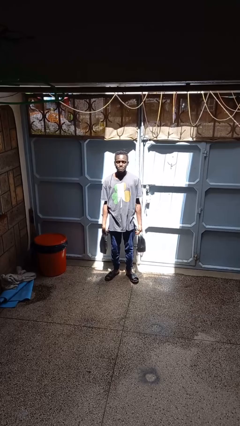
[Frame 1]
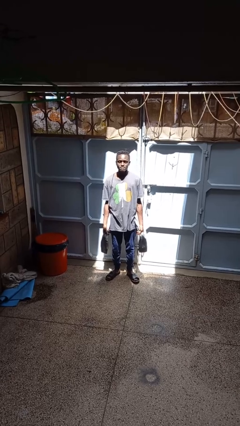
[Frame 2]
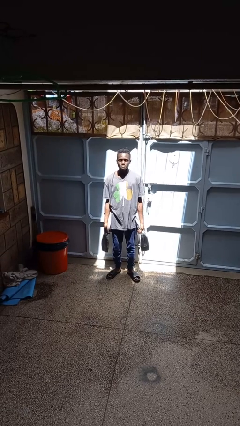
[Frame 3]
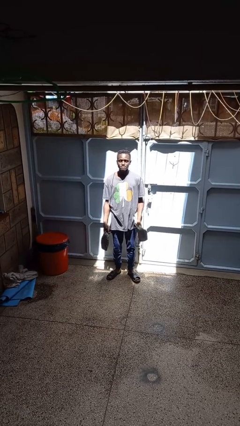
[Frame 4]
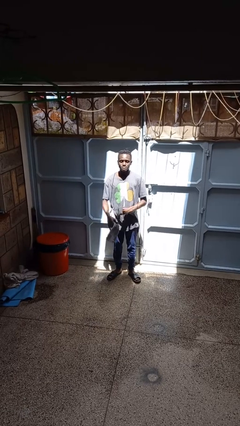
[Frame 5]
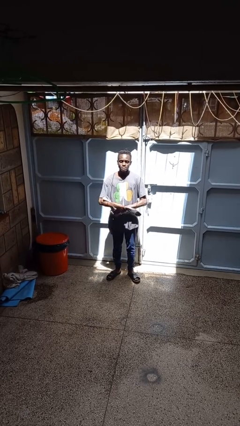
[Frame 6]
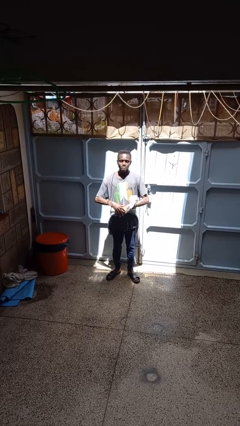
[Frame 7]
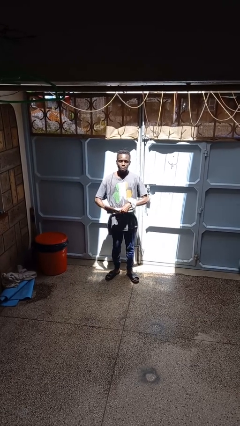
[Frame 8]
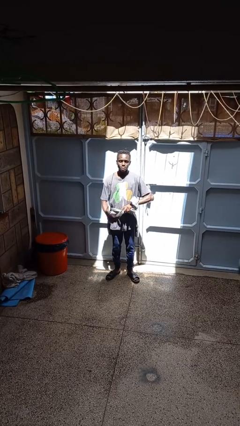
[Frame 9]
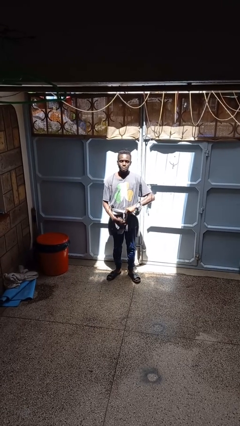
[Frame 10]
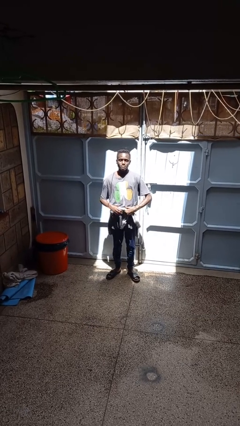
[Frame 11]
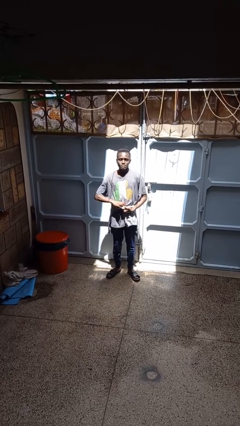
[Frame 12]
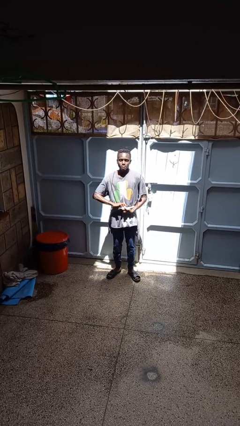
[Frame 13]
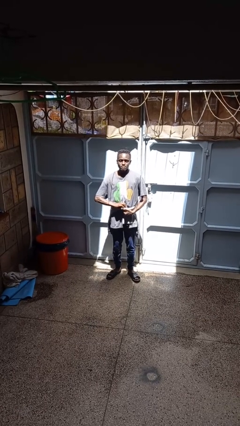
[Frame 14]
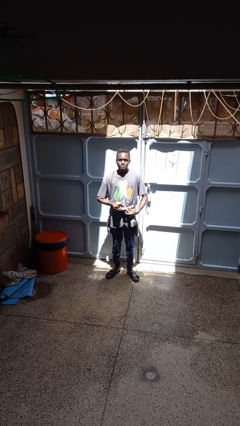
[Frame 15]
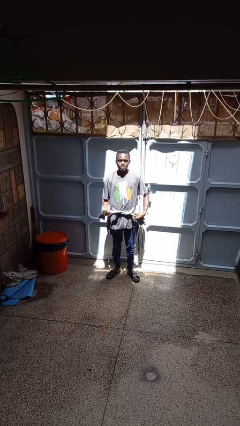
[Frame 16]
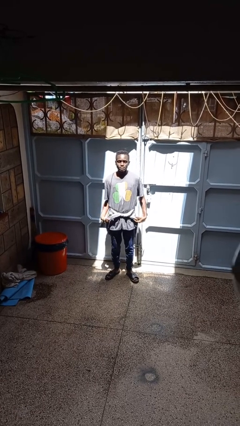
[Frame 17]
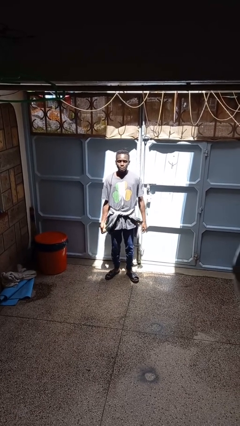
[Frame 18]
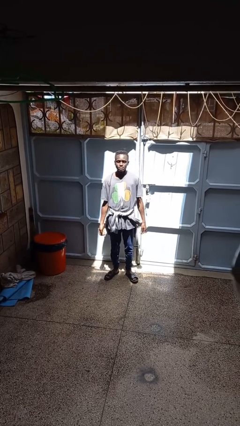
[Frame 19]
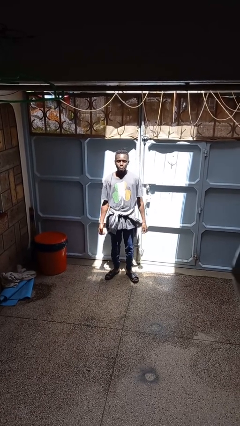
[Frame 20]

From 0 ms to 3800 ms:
person ties jacket around waist

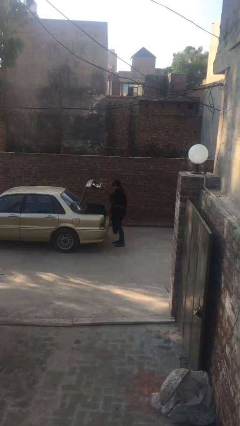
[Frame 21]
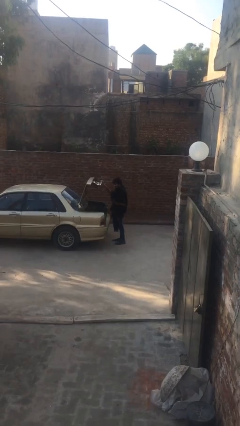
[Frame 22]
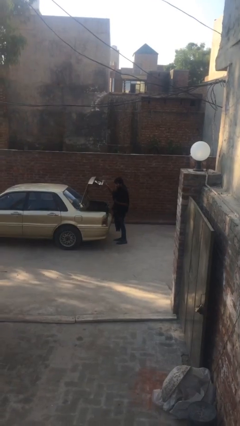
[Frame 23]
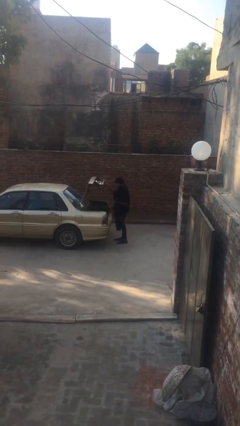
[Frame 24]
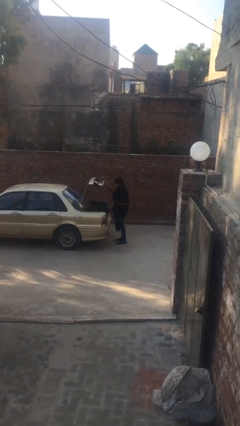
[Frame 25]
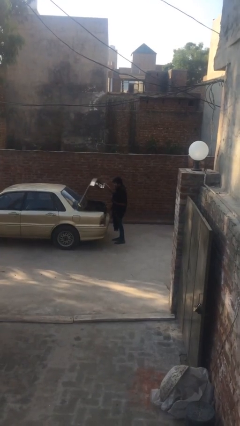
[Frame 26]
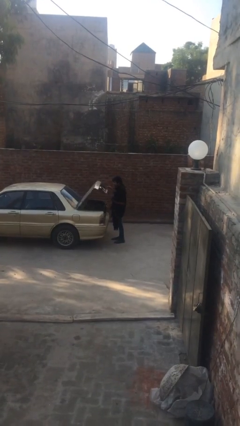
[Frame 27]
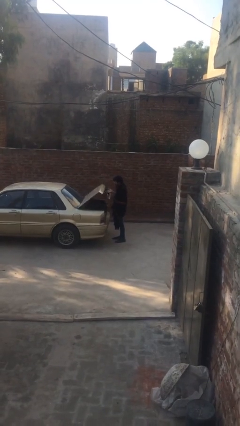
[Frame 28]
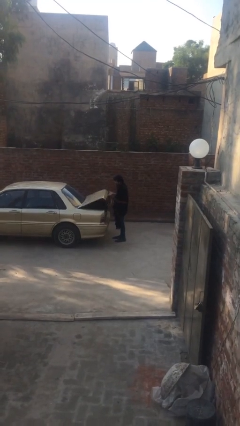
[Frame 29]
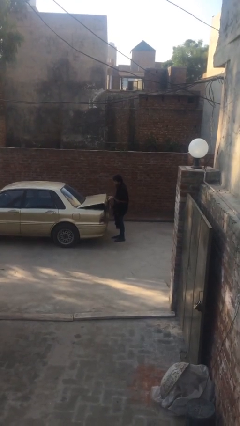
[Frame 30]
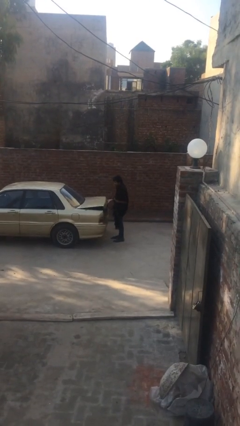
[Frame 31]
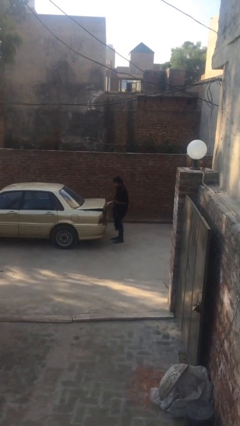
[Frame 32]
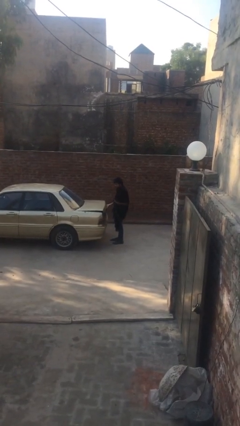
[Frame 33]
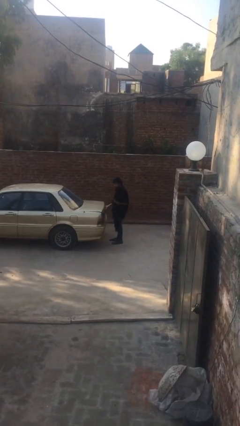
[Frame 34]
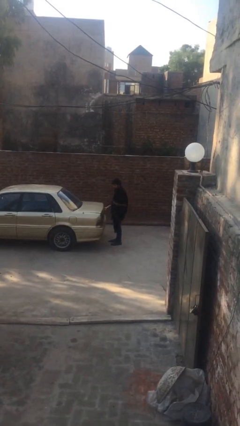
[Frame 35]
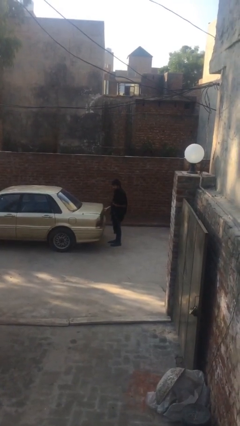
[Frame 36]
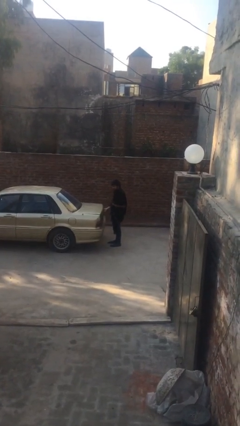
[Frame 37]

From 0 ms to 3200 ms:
person closes car trunk

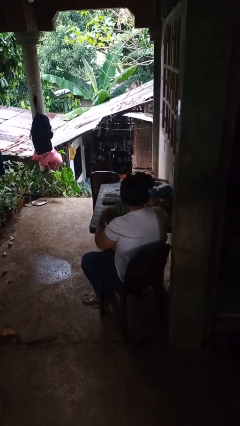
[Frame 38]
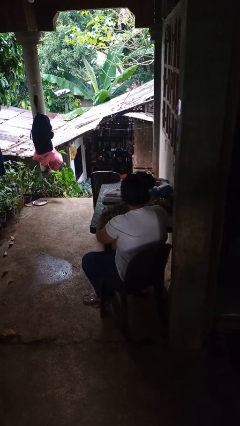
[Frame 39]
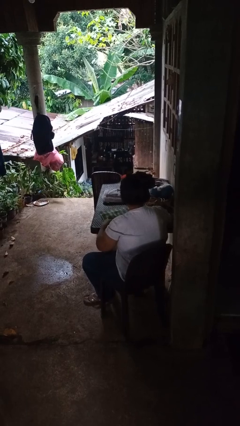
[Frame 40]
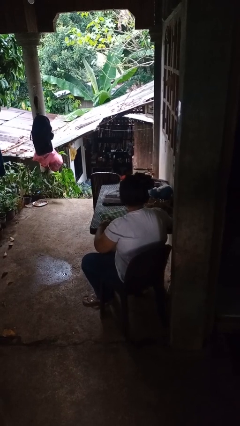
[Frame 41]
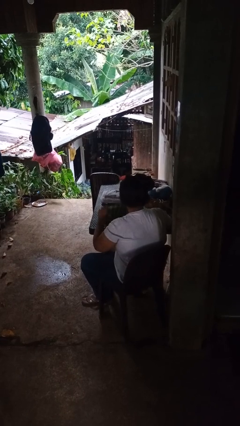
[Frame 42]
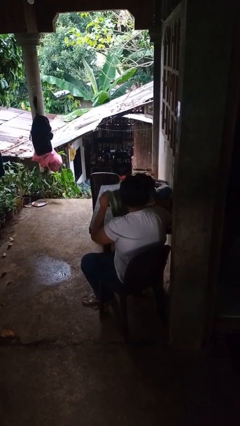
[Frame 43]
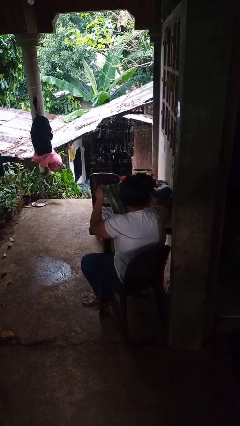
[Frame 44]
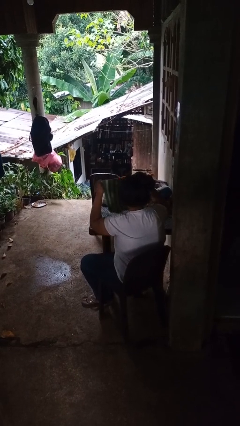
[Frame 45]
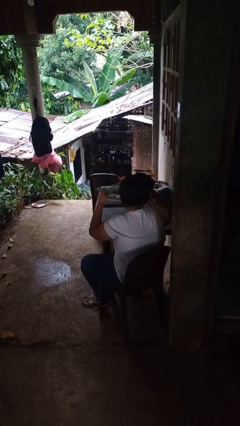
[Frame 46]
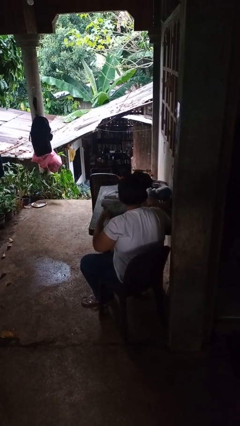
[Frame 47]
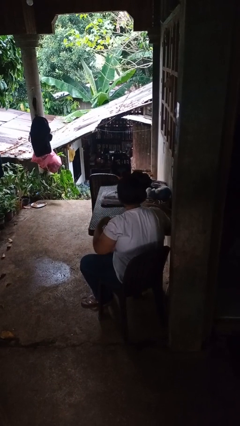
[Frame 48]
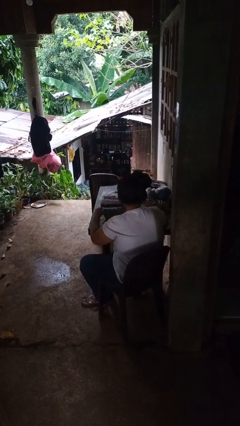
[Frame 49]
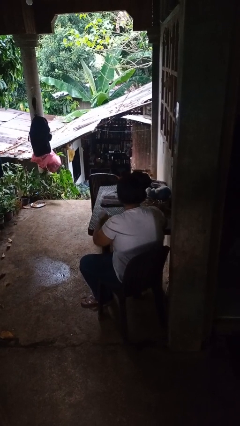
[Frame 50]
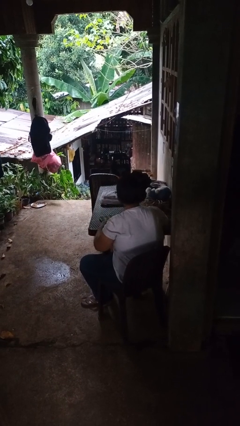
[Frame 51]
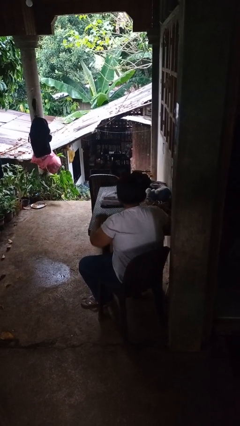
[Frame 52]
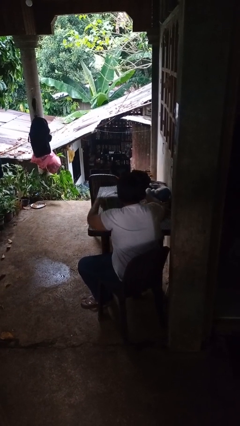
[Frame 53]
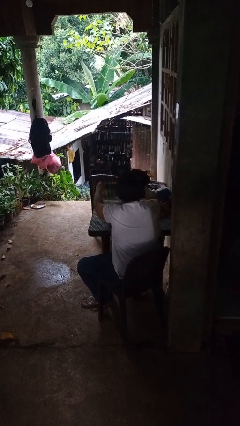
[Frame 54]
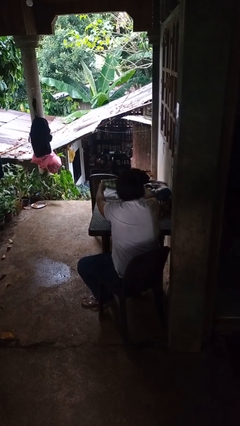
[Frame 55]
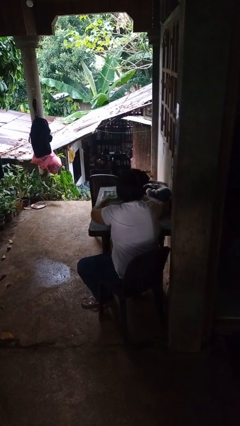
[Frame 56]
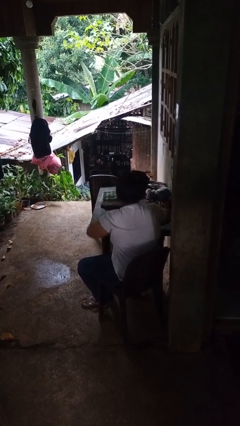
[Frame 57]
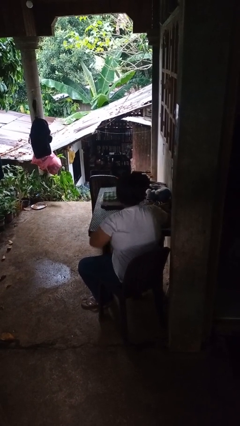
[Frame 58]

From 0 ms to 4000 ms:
person folds towel

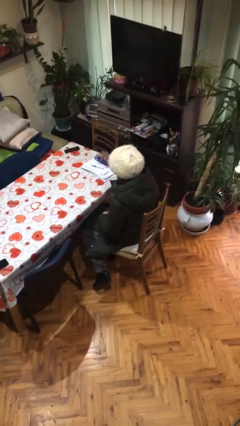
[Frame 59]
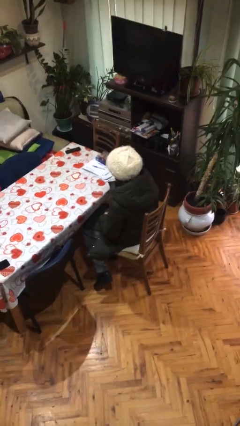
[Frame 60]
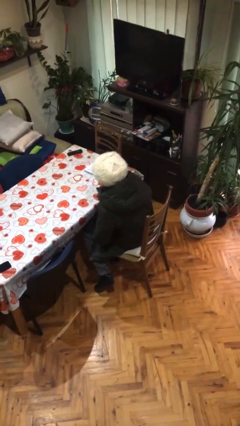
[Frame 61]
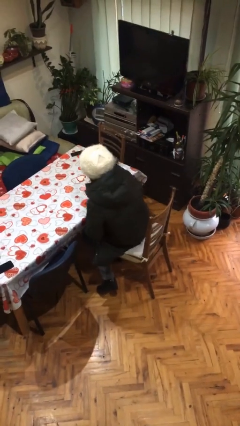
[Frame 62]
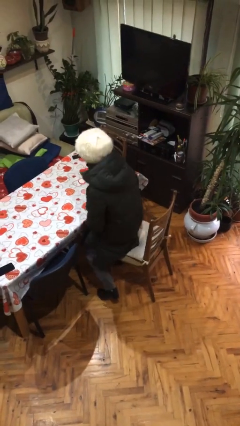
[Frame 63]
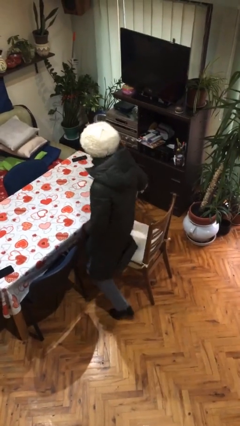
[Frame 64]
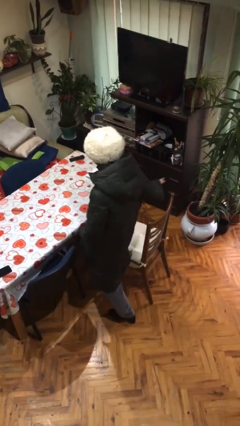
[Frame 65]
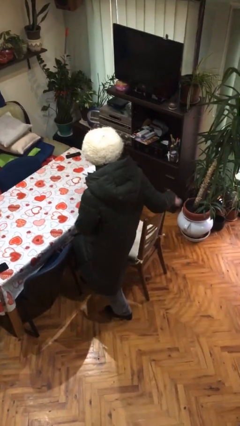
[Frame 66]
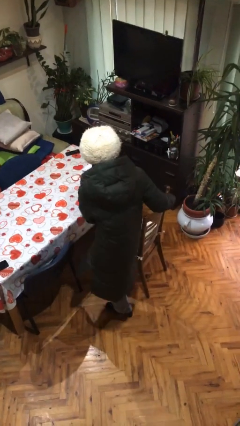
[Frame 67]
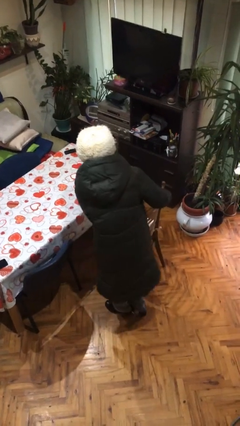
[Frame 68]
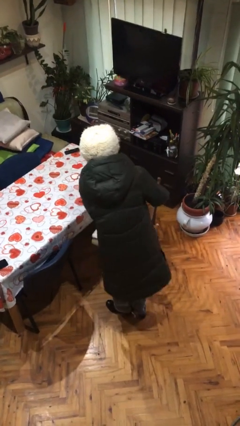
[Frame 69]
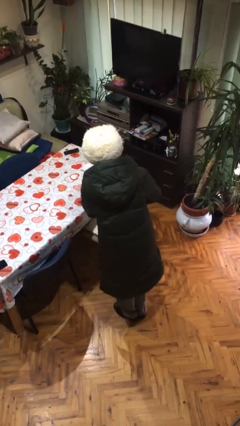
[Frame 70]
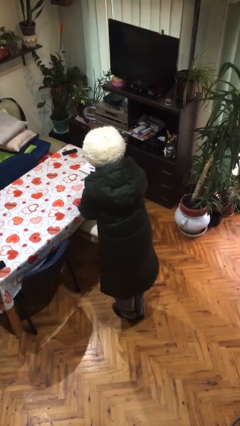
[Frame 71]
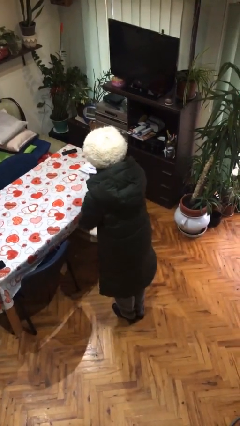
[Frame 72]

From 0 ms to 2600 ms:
person stands up

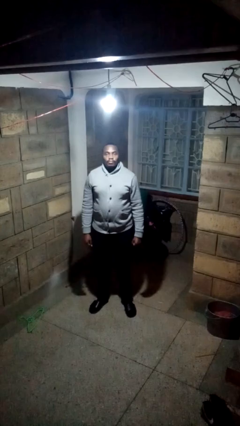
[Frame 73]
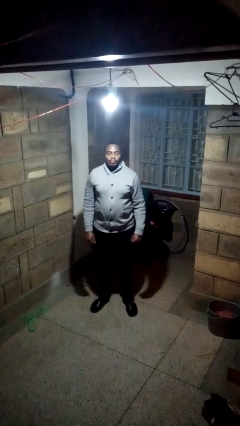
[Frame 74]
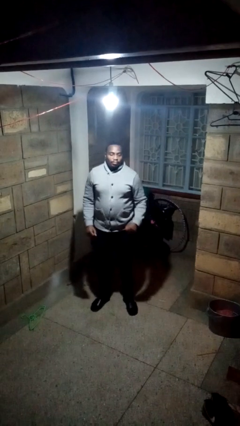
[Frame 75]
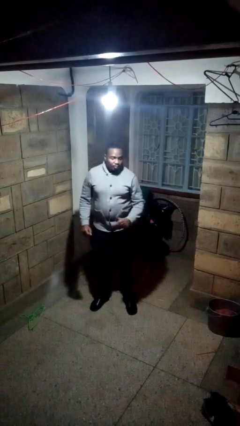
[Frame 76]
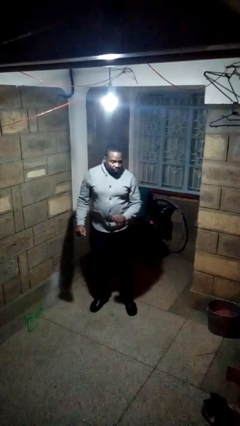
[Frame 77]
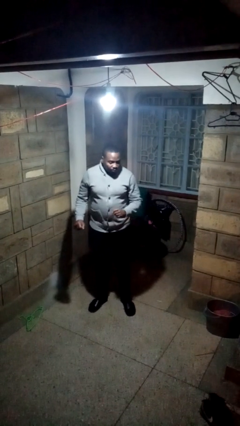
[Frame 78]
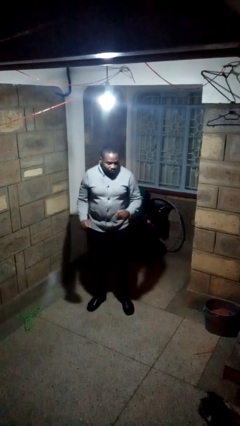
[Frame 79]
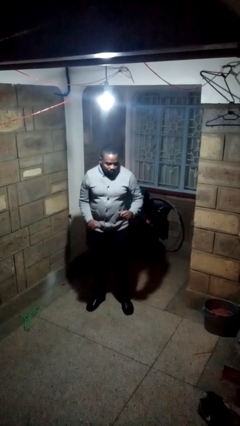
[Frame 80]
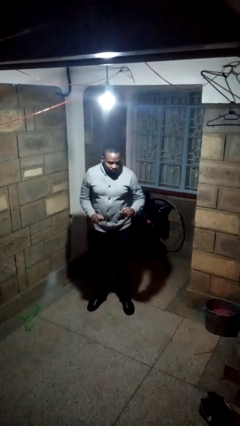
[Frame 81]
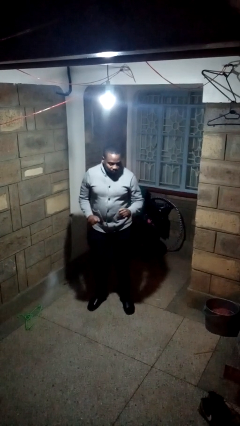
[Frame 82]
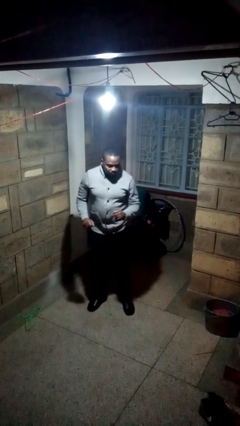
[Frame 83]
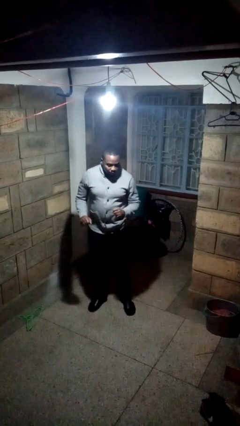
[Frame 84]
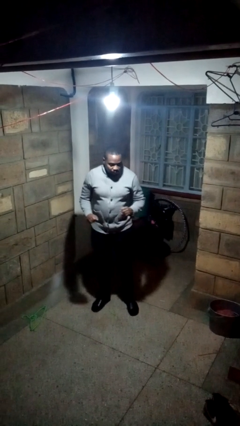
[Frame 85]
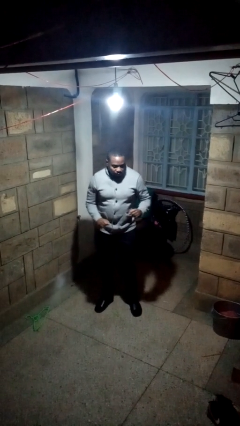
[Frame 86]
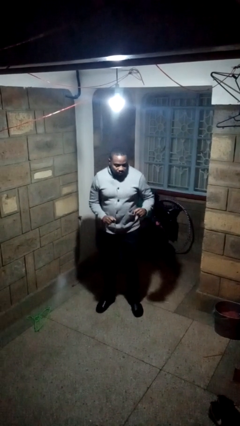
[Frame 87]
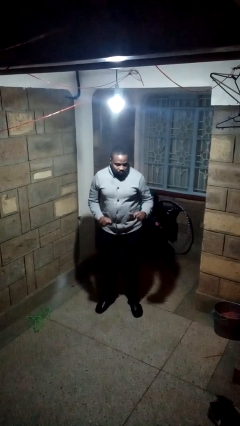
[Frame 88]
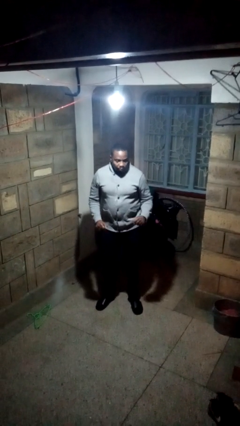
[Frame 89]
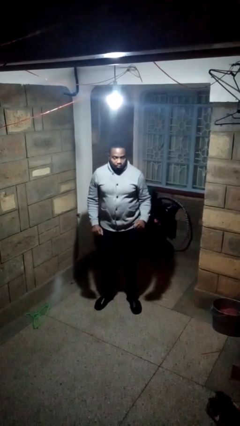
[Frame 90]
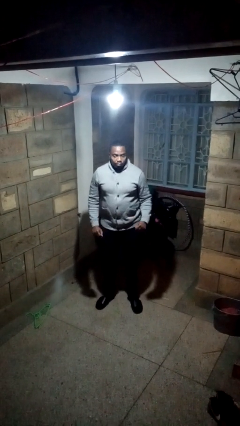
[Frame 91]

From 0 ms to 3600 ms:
person dances in place

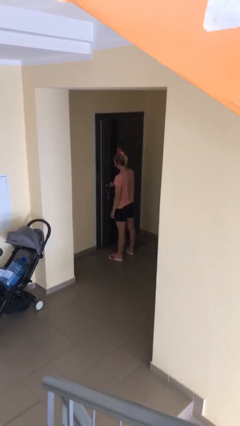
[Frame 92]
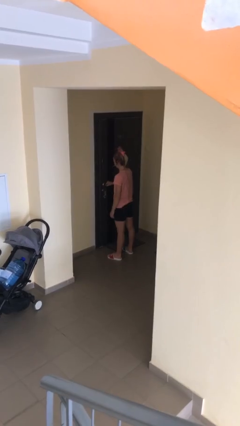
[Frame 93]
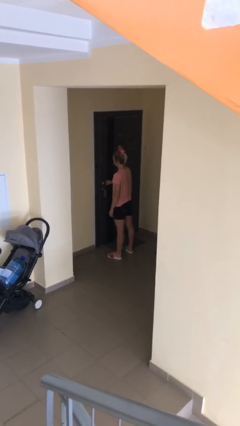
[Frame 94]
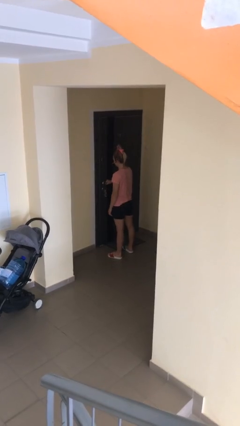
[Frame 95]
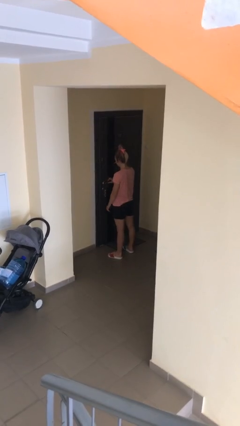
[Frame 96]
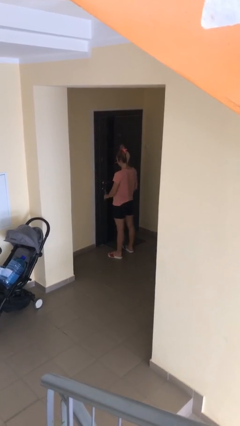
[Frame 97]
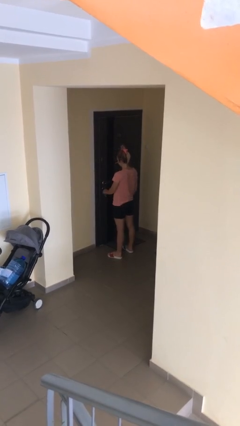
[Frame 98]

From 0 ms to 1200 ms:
person closes facility door
